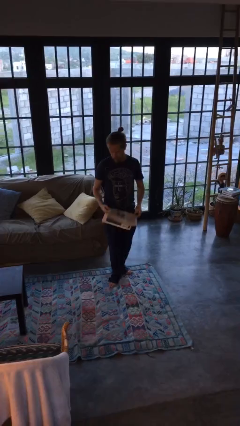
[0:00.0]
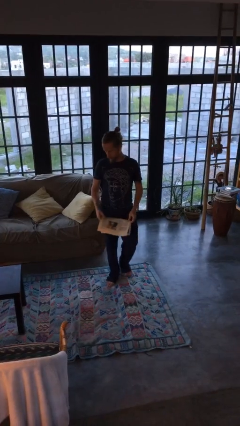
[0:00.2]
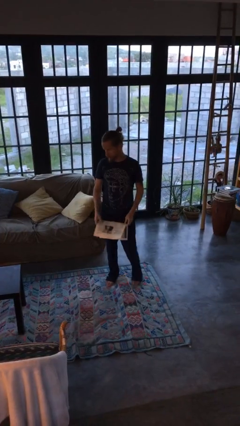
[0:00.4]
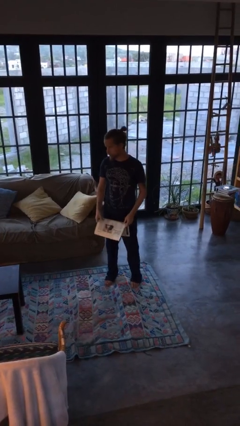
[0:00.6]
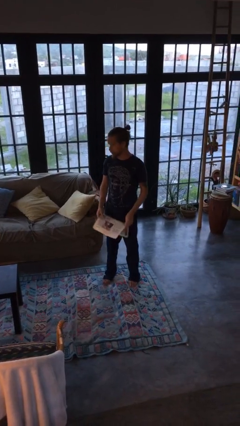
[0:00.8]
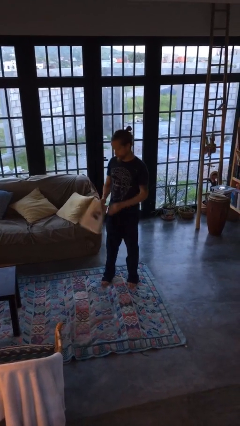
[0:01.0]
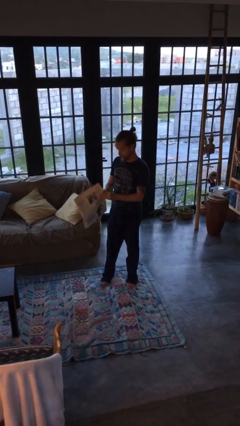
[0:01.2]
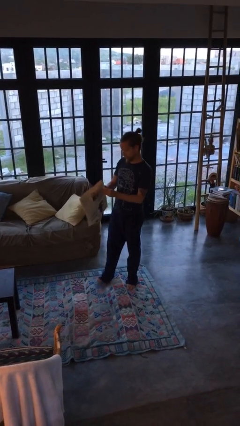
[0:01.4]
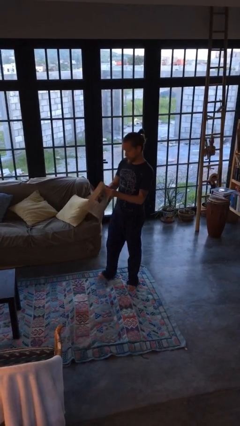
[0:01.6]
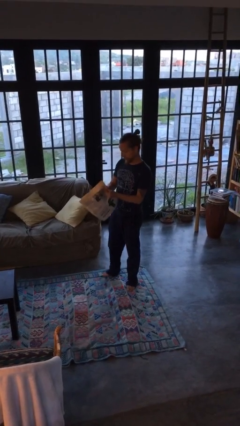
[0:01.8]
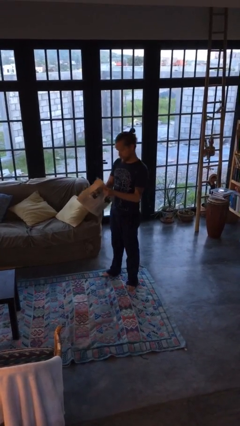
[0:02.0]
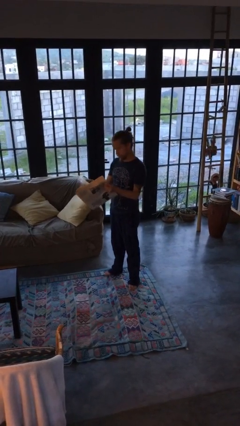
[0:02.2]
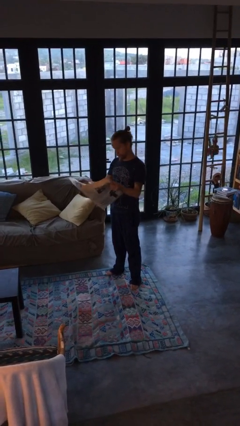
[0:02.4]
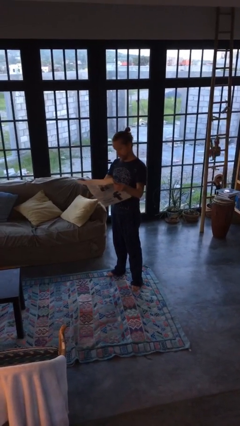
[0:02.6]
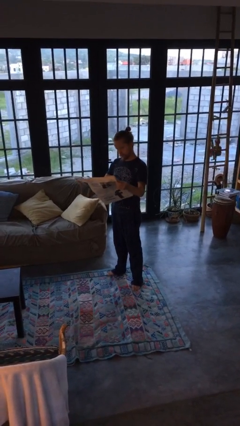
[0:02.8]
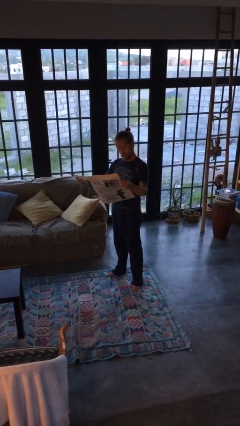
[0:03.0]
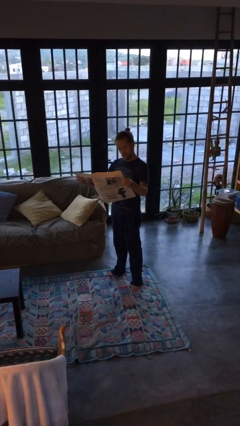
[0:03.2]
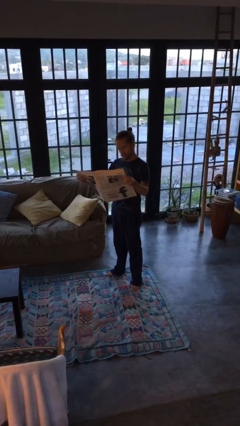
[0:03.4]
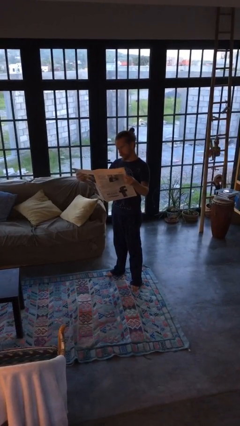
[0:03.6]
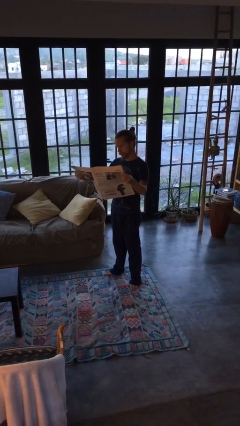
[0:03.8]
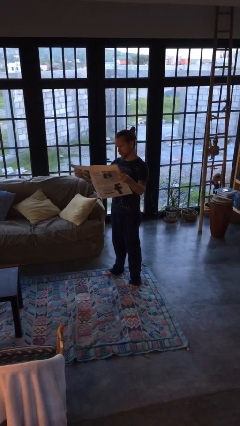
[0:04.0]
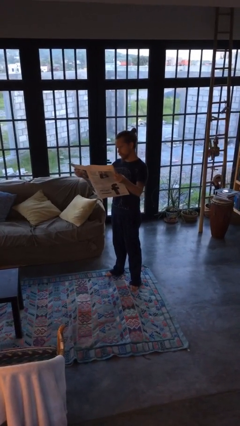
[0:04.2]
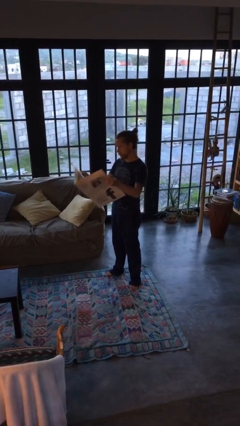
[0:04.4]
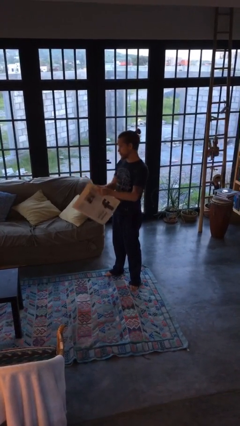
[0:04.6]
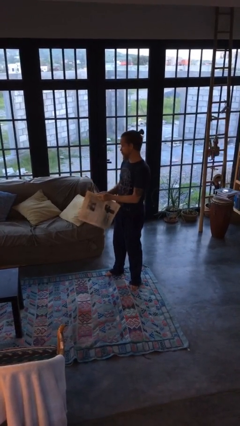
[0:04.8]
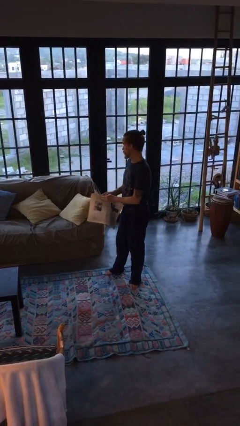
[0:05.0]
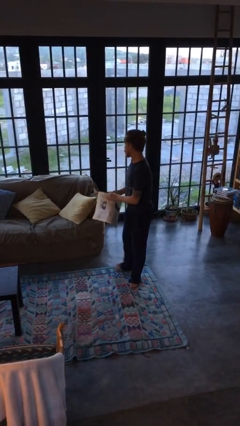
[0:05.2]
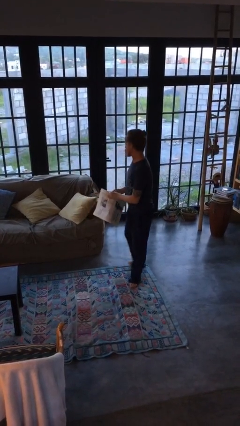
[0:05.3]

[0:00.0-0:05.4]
person reads newspaper

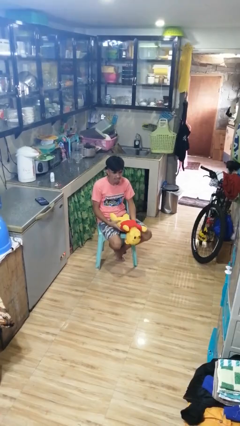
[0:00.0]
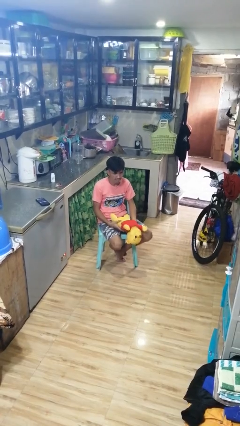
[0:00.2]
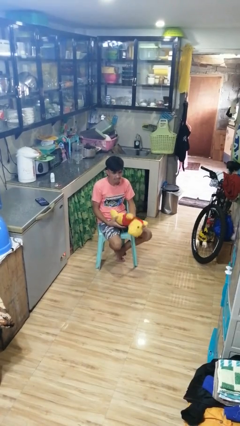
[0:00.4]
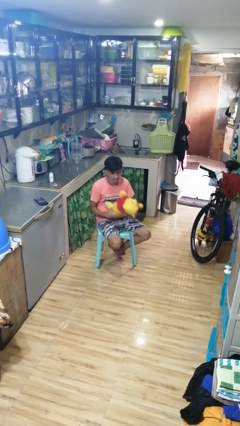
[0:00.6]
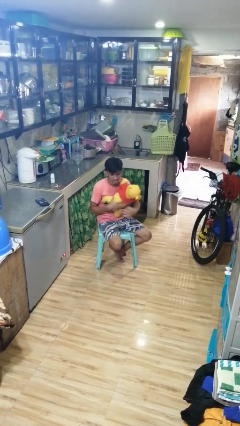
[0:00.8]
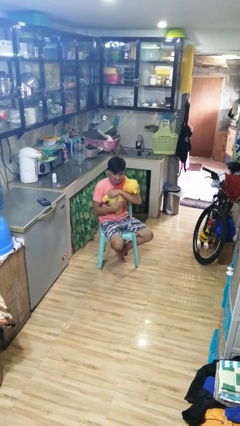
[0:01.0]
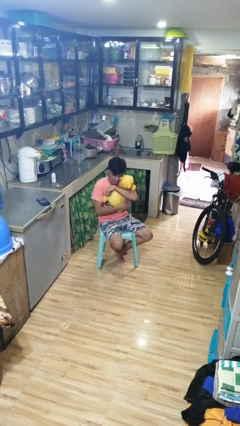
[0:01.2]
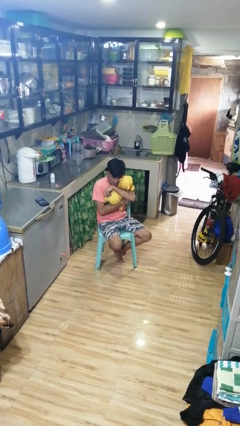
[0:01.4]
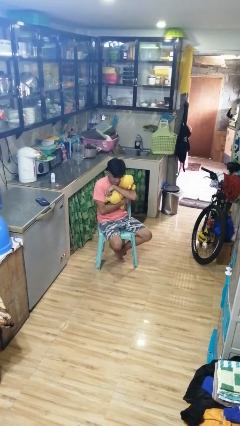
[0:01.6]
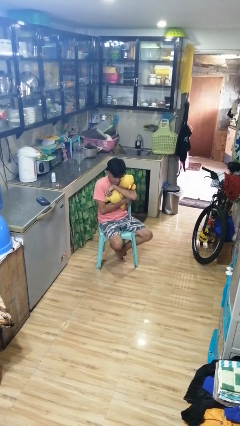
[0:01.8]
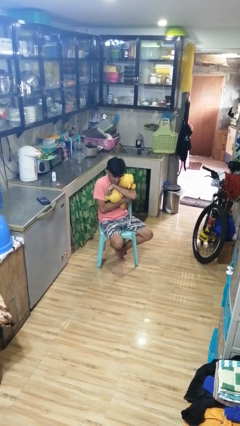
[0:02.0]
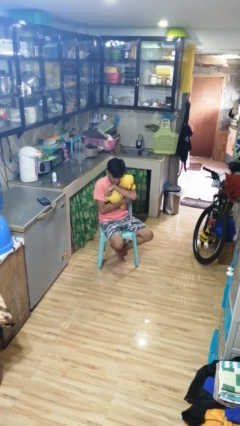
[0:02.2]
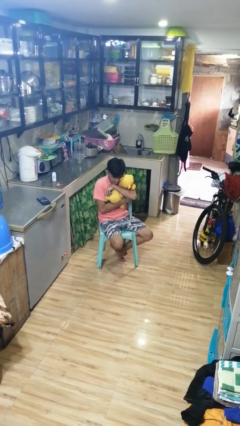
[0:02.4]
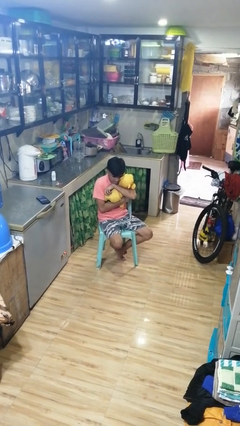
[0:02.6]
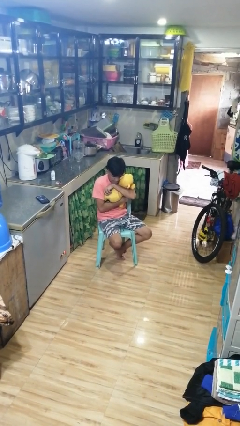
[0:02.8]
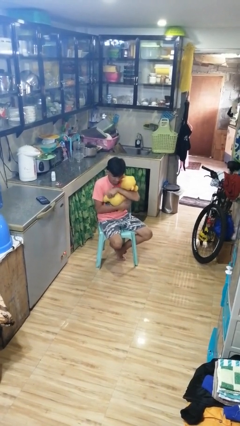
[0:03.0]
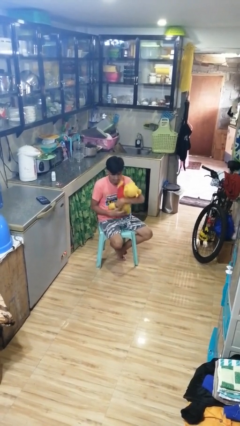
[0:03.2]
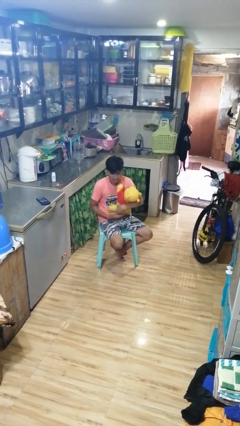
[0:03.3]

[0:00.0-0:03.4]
person hugs stuffed animal

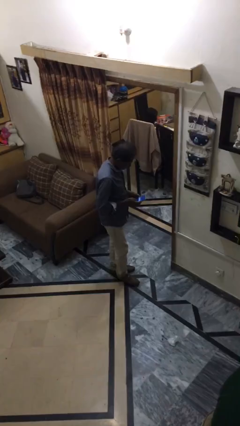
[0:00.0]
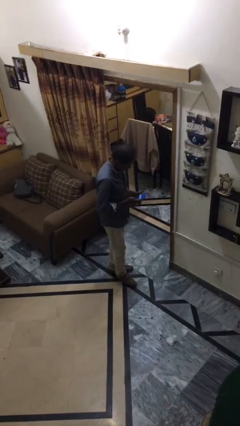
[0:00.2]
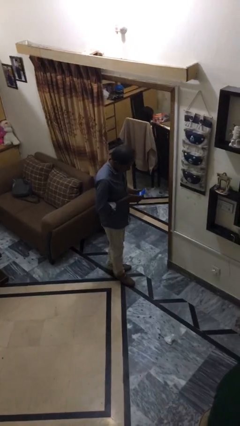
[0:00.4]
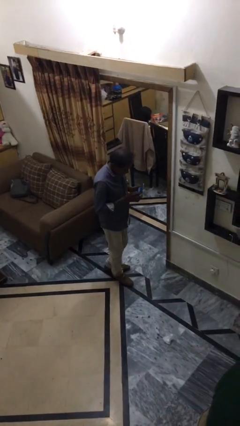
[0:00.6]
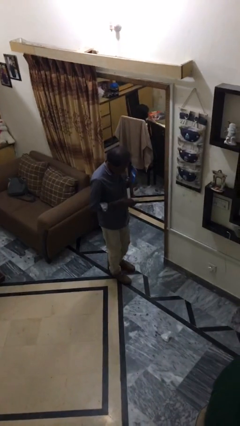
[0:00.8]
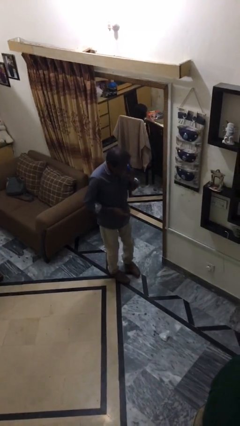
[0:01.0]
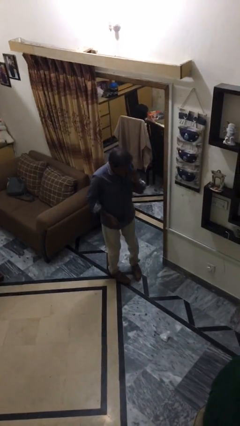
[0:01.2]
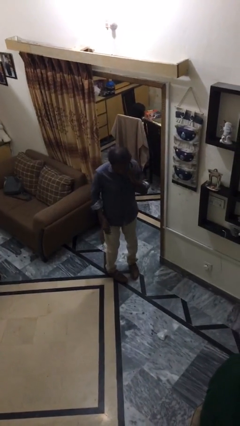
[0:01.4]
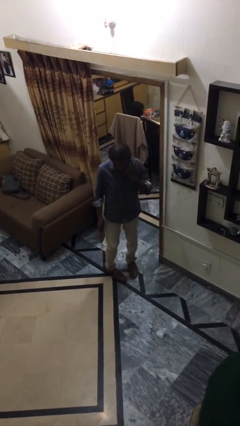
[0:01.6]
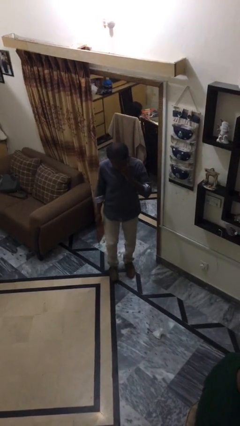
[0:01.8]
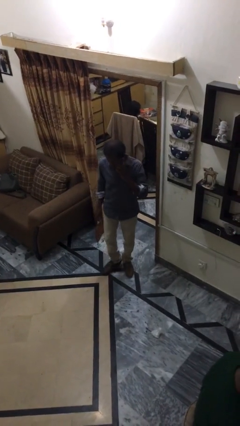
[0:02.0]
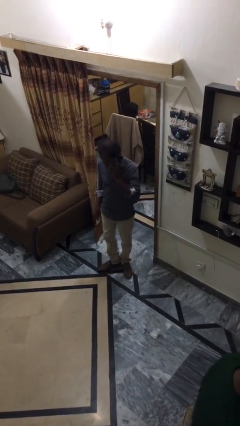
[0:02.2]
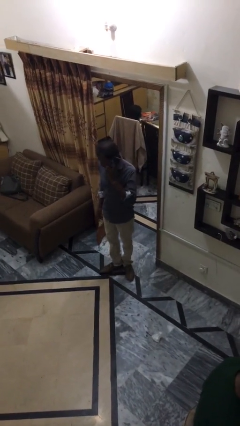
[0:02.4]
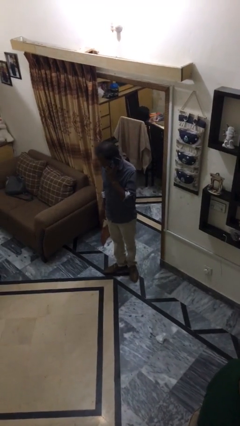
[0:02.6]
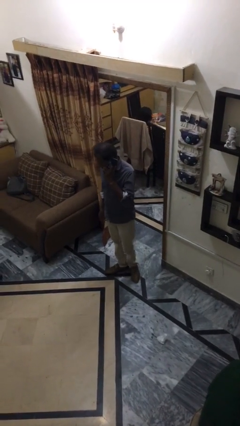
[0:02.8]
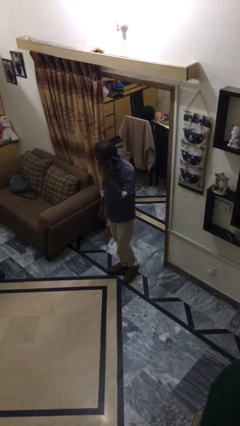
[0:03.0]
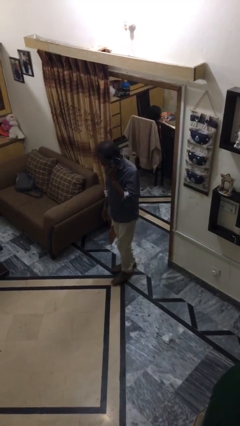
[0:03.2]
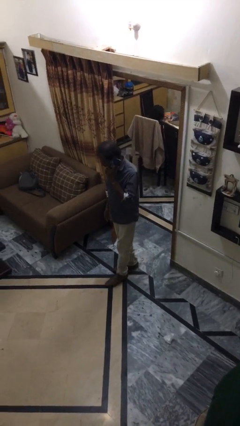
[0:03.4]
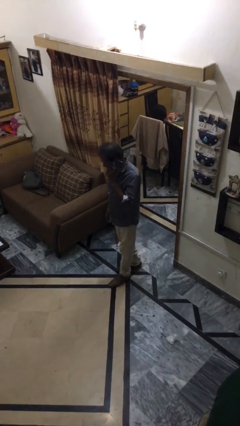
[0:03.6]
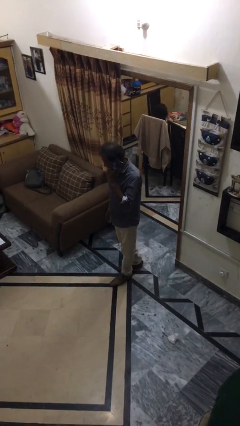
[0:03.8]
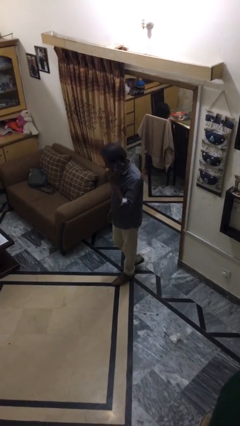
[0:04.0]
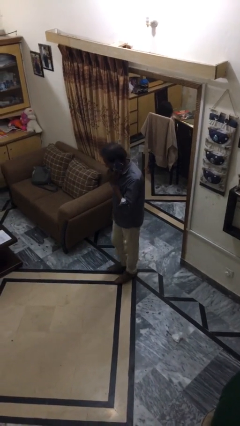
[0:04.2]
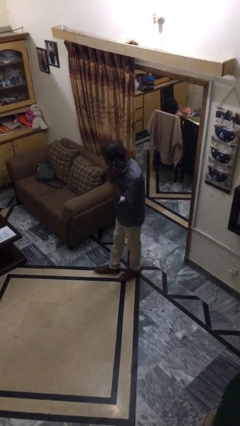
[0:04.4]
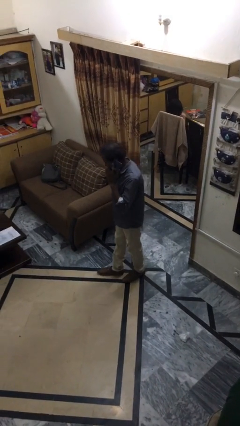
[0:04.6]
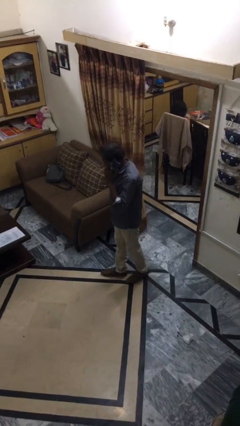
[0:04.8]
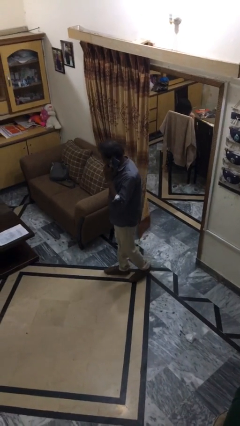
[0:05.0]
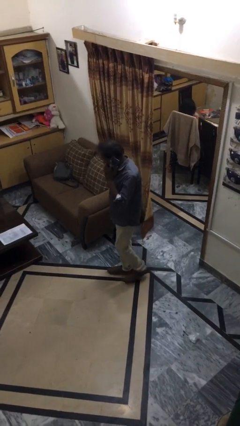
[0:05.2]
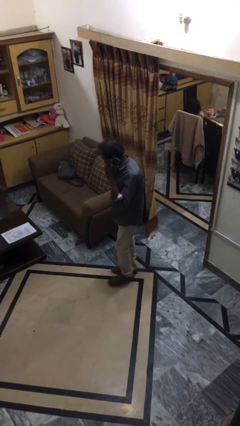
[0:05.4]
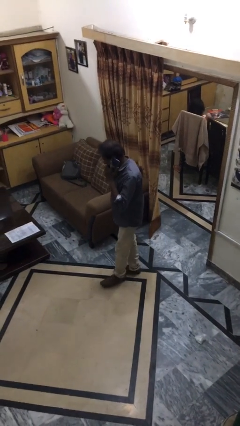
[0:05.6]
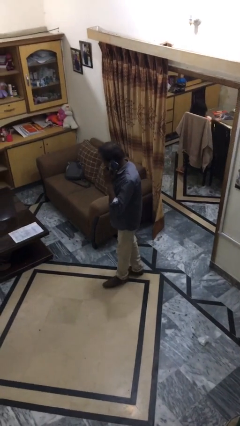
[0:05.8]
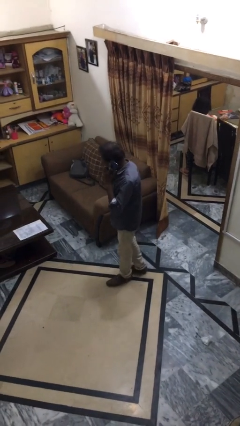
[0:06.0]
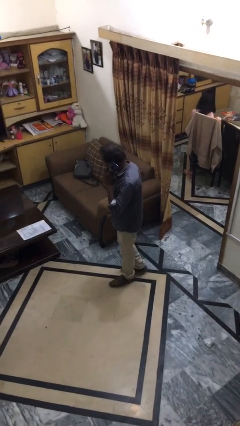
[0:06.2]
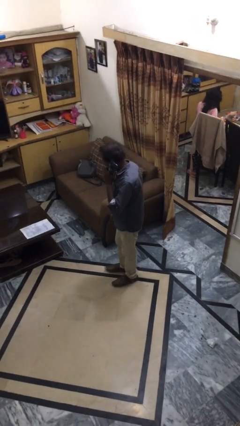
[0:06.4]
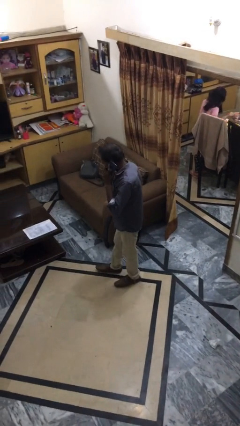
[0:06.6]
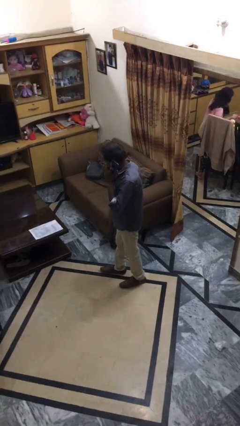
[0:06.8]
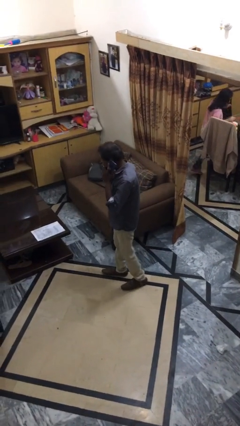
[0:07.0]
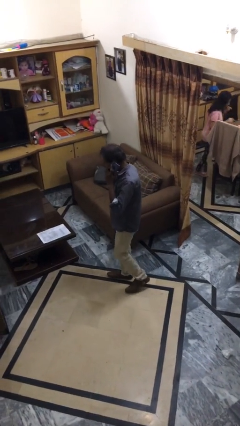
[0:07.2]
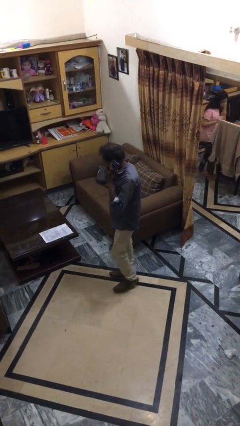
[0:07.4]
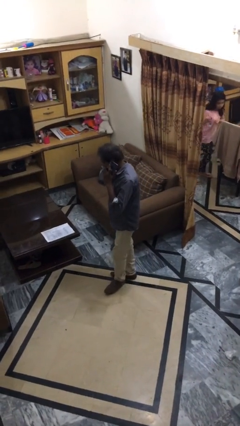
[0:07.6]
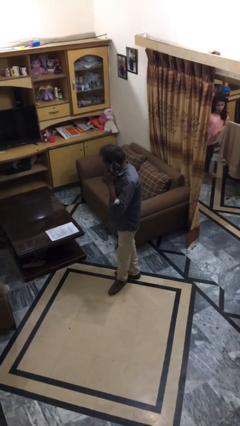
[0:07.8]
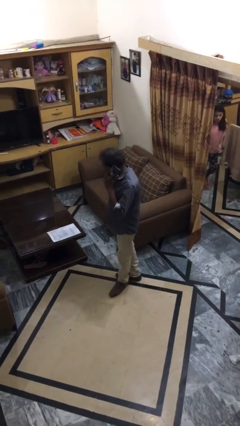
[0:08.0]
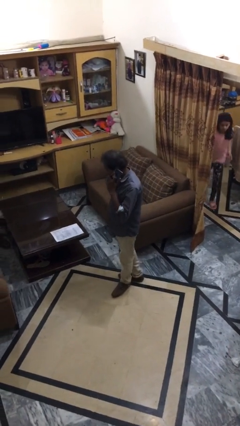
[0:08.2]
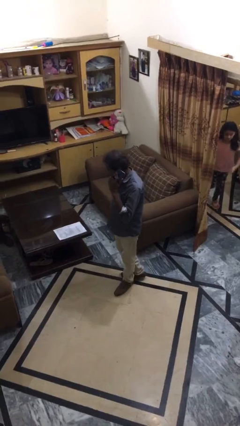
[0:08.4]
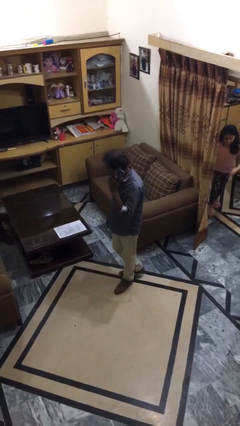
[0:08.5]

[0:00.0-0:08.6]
person talks on phone

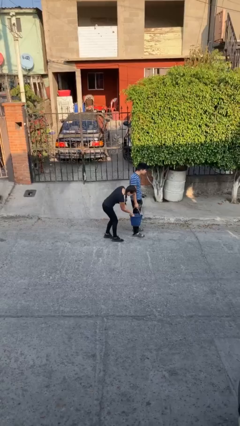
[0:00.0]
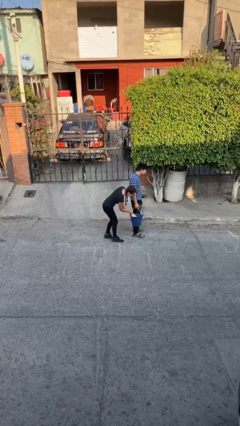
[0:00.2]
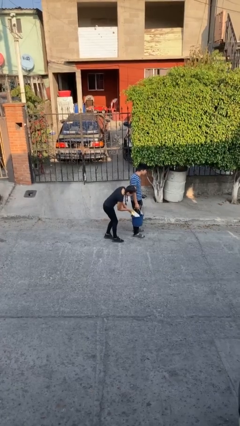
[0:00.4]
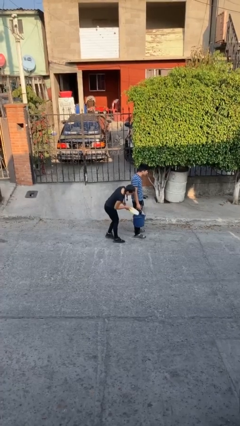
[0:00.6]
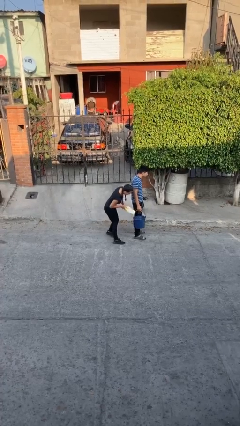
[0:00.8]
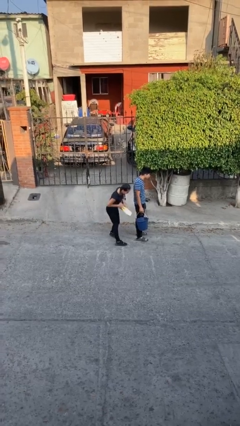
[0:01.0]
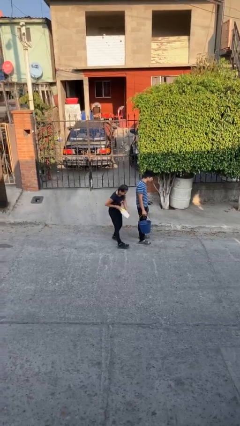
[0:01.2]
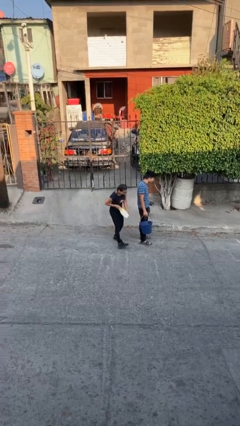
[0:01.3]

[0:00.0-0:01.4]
person steals object from person
